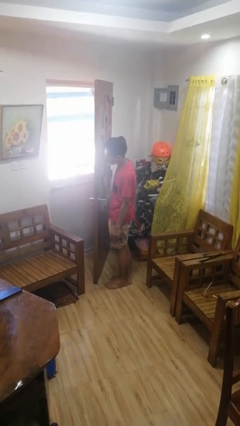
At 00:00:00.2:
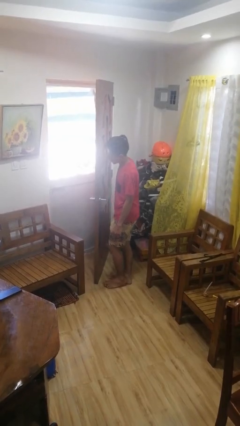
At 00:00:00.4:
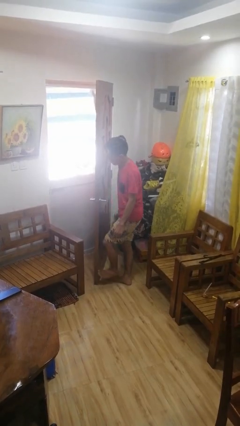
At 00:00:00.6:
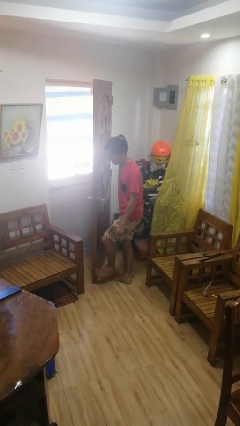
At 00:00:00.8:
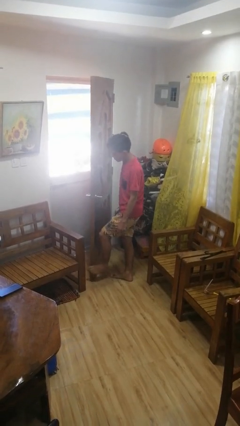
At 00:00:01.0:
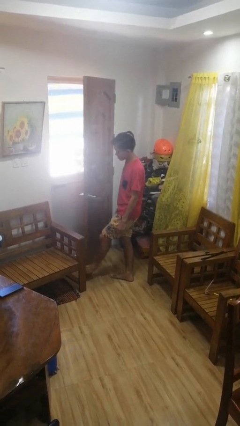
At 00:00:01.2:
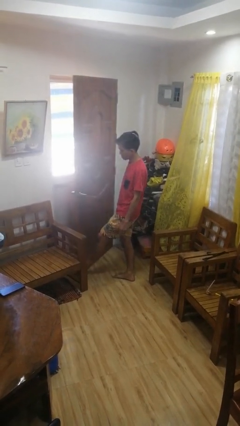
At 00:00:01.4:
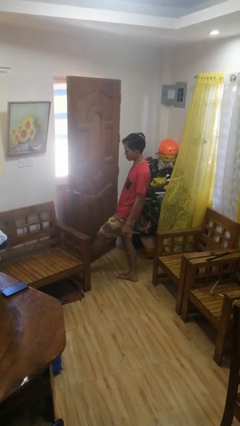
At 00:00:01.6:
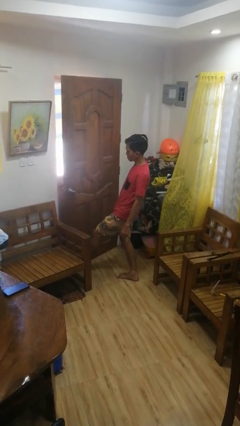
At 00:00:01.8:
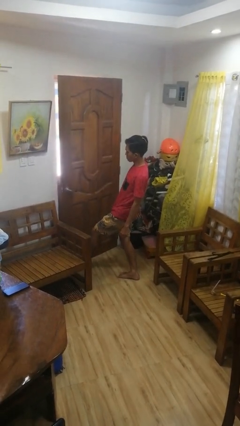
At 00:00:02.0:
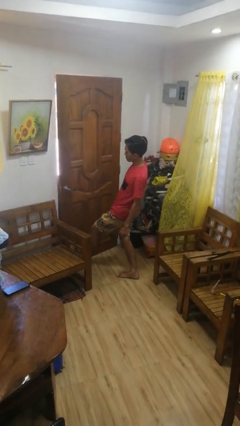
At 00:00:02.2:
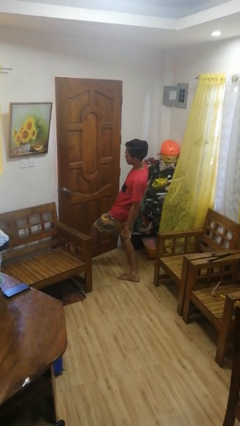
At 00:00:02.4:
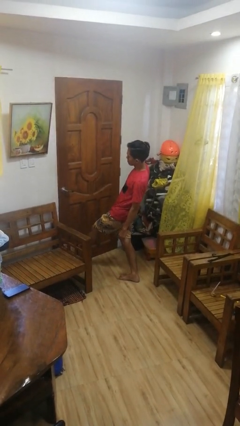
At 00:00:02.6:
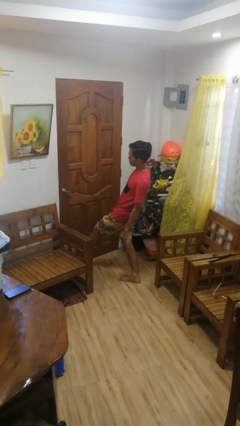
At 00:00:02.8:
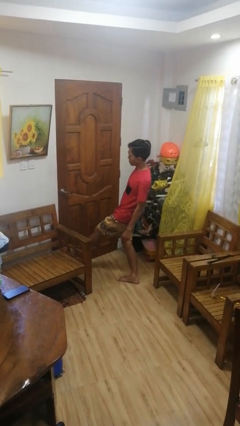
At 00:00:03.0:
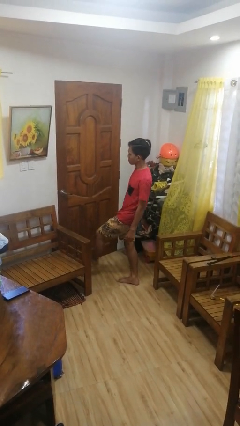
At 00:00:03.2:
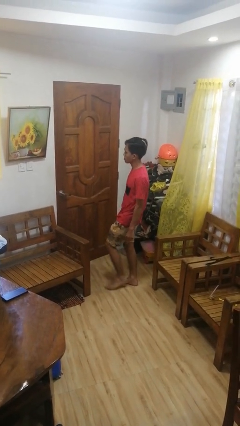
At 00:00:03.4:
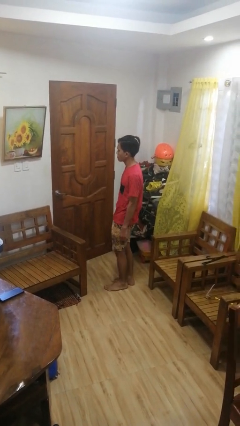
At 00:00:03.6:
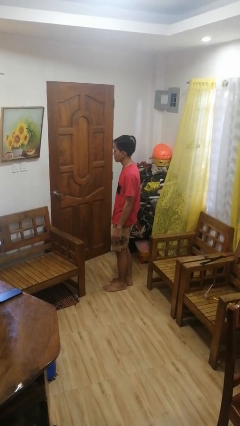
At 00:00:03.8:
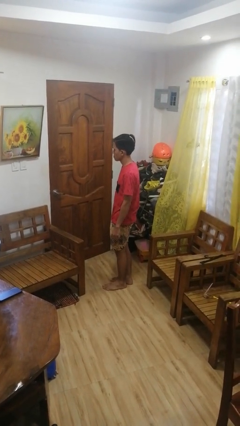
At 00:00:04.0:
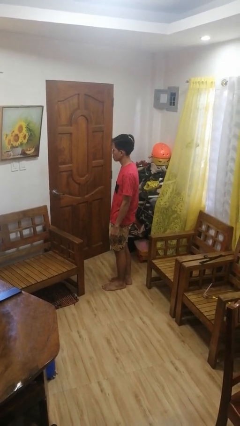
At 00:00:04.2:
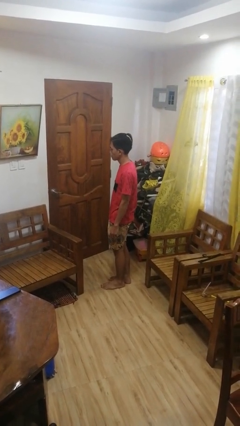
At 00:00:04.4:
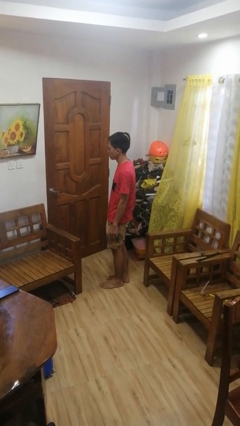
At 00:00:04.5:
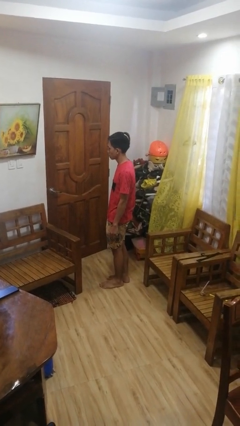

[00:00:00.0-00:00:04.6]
person closes door with foot

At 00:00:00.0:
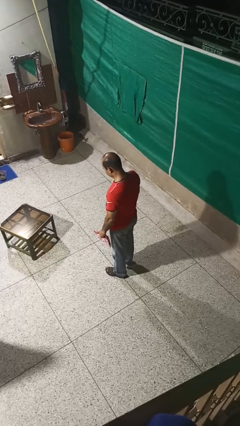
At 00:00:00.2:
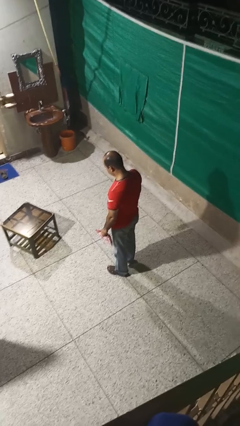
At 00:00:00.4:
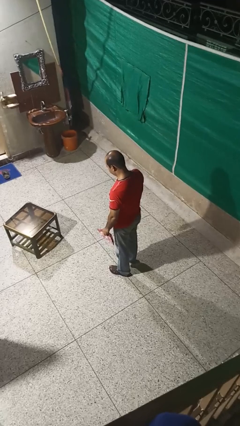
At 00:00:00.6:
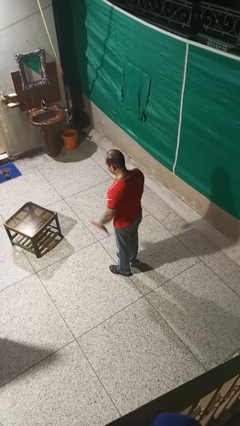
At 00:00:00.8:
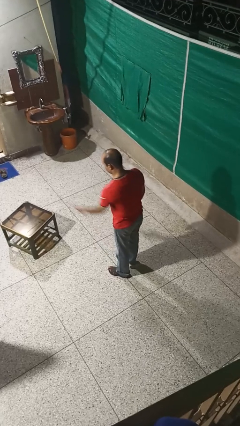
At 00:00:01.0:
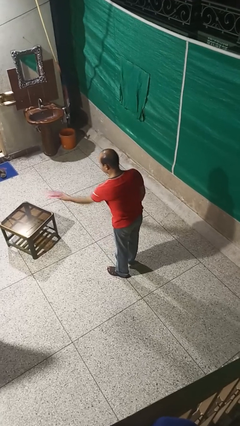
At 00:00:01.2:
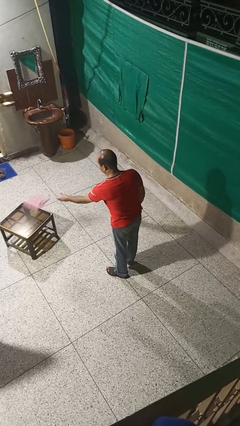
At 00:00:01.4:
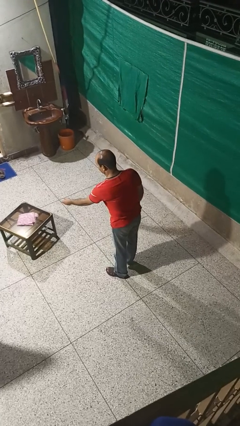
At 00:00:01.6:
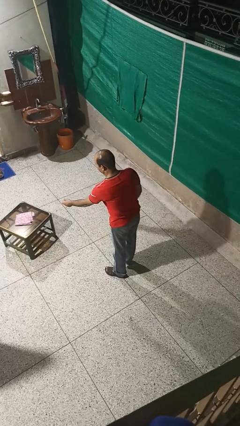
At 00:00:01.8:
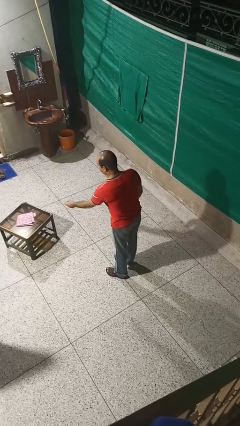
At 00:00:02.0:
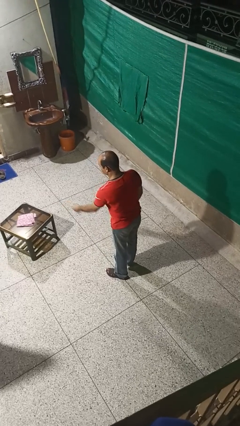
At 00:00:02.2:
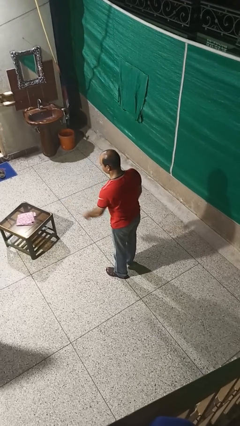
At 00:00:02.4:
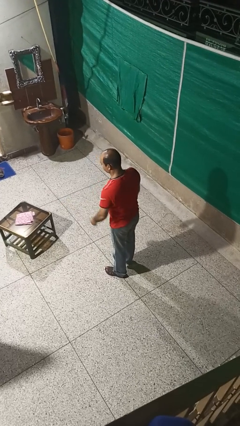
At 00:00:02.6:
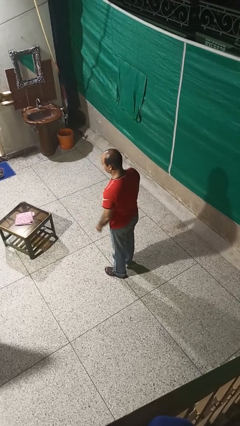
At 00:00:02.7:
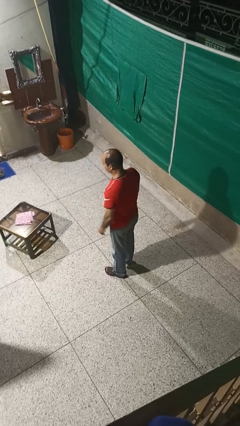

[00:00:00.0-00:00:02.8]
person throws object on table

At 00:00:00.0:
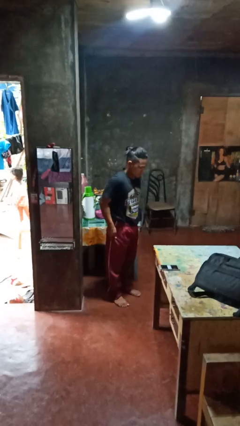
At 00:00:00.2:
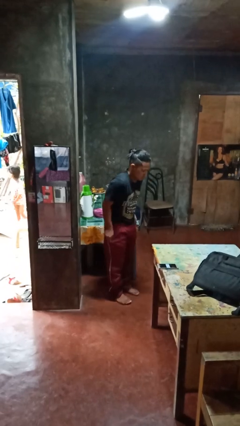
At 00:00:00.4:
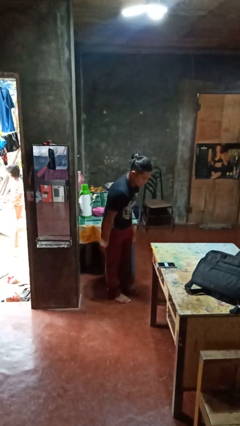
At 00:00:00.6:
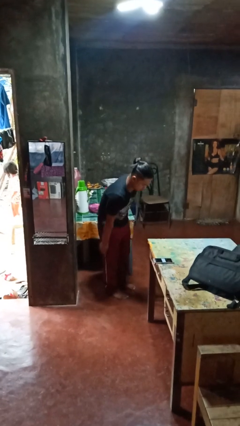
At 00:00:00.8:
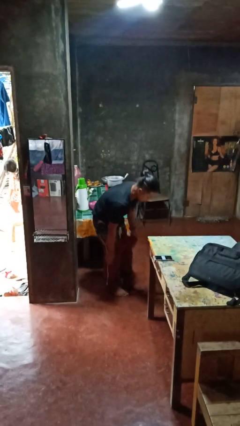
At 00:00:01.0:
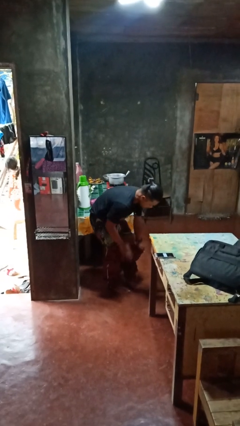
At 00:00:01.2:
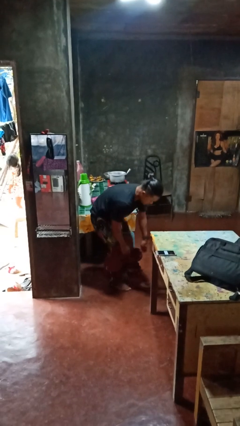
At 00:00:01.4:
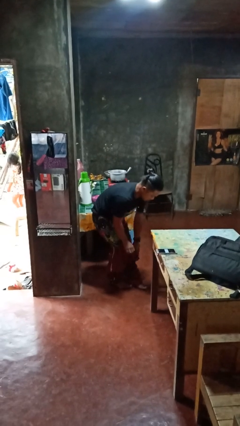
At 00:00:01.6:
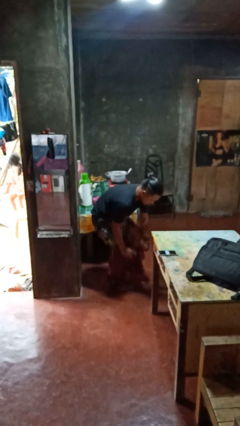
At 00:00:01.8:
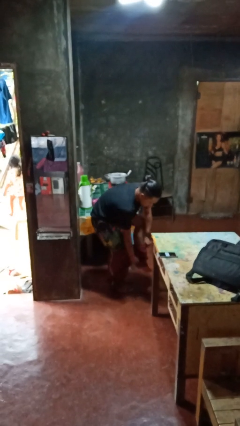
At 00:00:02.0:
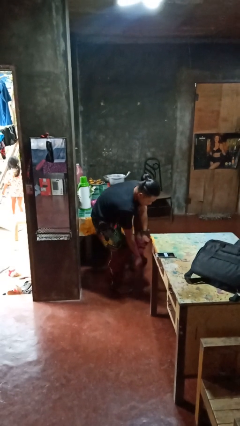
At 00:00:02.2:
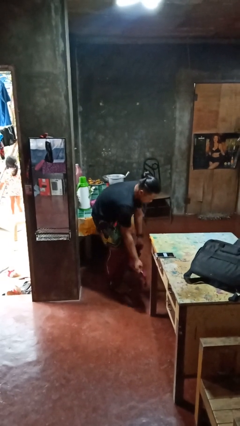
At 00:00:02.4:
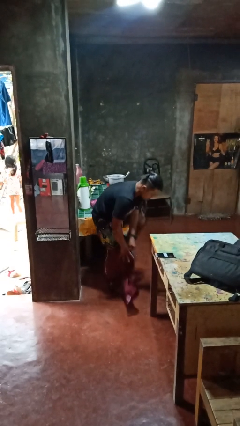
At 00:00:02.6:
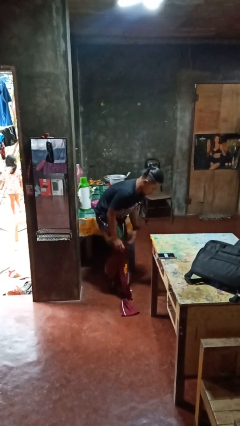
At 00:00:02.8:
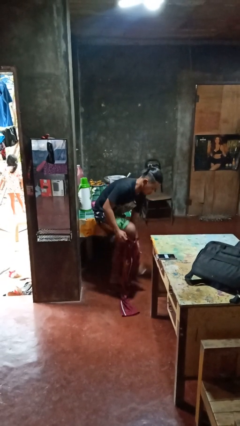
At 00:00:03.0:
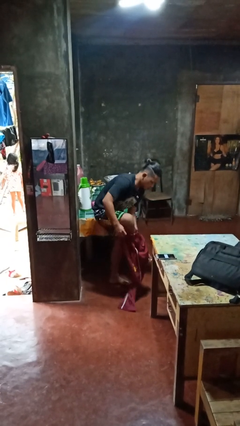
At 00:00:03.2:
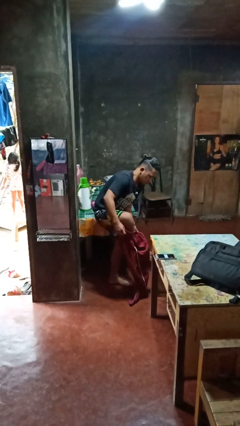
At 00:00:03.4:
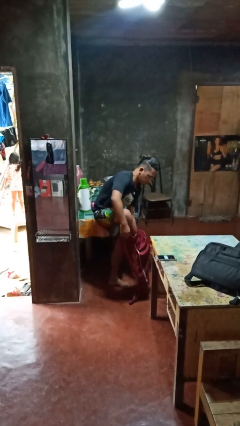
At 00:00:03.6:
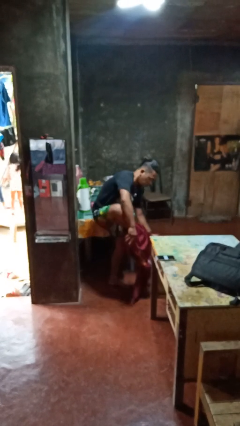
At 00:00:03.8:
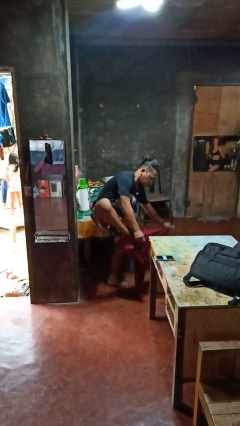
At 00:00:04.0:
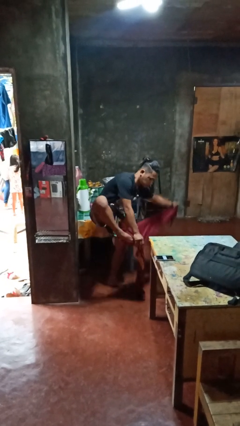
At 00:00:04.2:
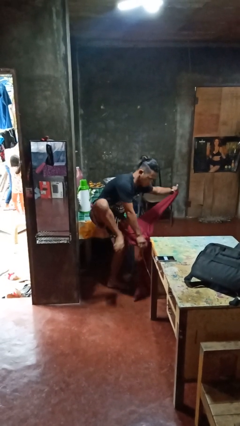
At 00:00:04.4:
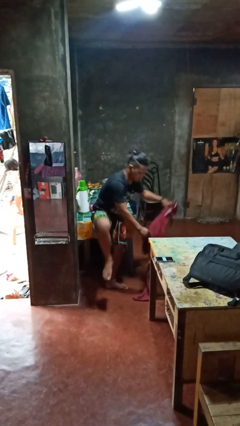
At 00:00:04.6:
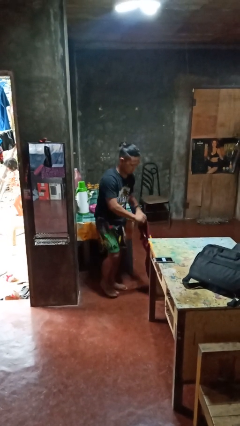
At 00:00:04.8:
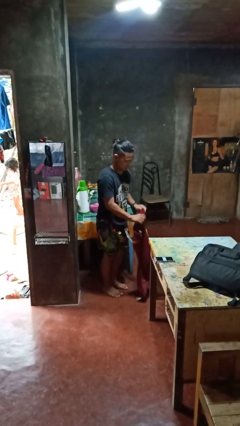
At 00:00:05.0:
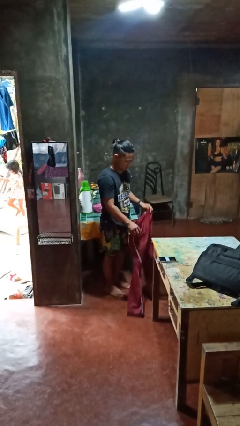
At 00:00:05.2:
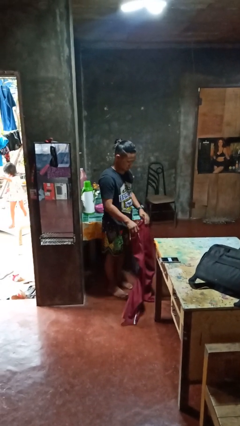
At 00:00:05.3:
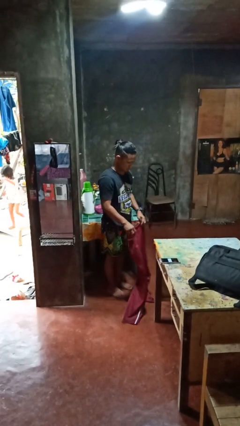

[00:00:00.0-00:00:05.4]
person takes off pants

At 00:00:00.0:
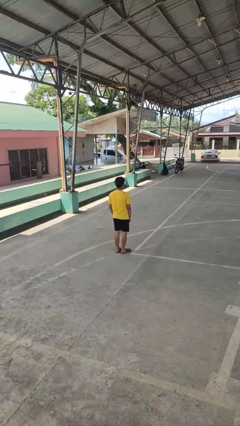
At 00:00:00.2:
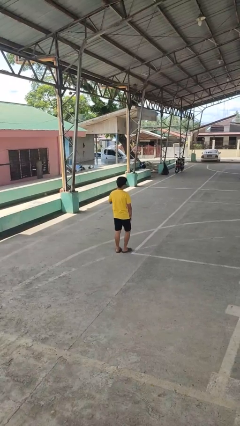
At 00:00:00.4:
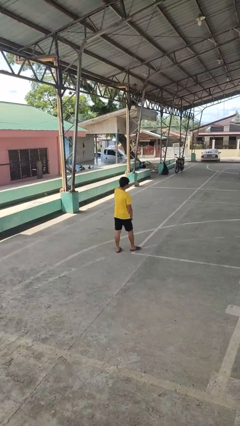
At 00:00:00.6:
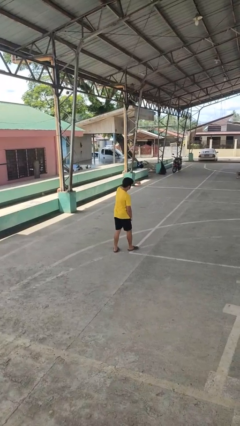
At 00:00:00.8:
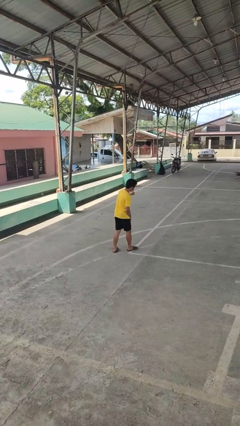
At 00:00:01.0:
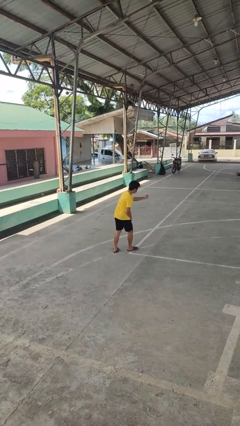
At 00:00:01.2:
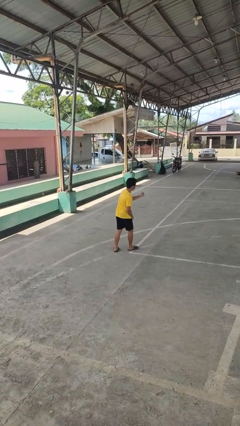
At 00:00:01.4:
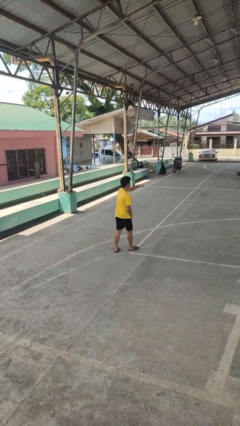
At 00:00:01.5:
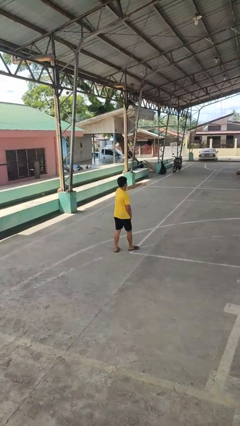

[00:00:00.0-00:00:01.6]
person punches

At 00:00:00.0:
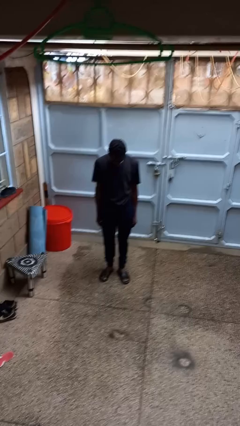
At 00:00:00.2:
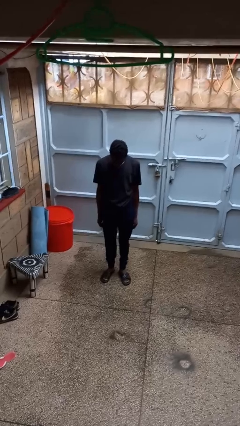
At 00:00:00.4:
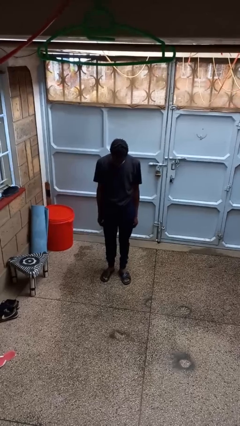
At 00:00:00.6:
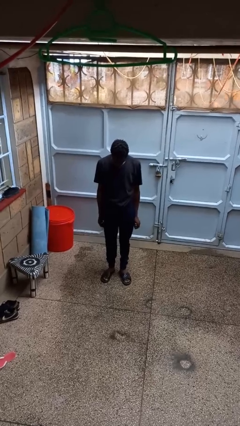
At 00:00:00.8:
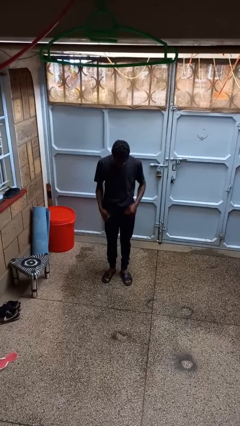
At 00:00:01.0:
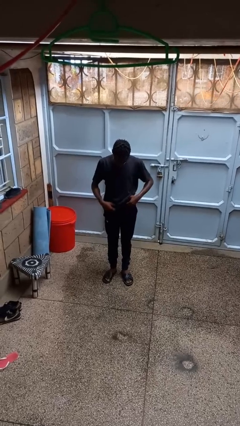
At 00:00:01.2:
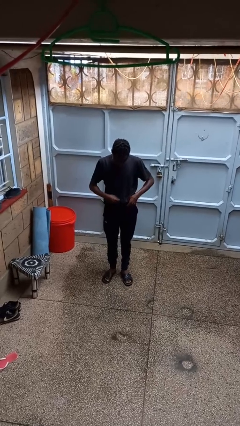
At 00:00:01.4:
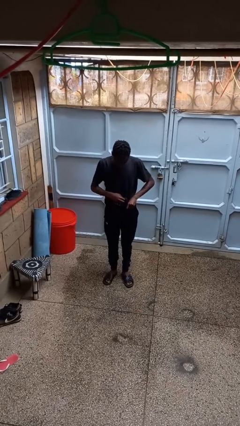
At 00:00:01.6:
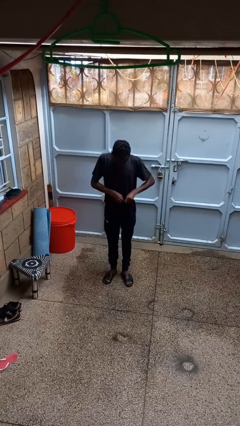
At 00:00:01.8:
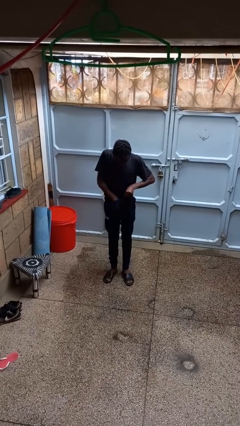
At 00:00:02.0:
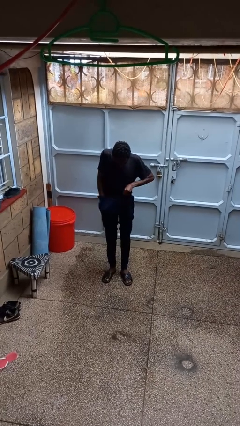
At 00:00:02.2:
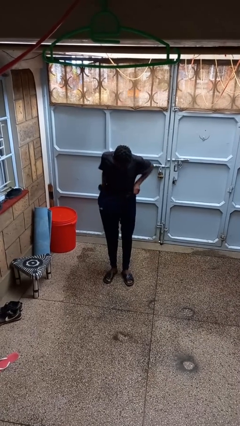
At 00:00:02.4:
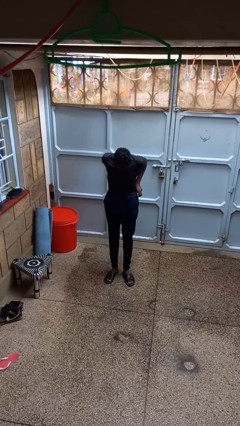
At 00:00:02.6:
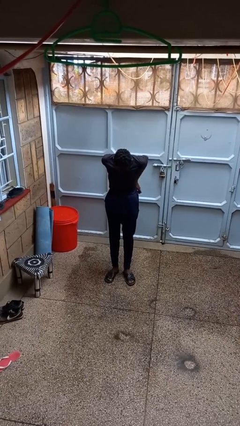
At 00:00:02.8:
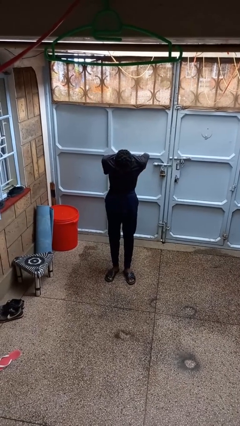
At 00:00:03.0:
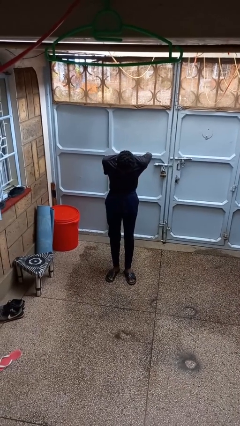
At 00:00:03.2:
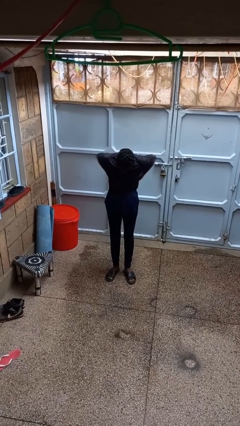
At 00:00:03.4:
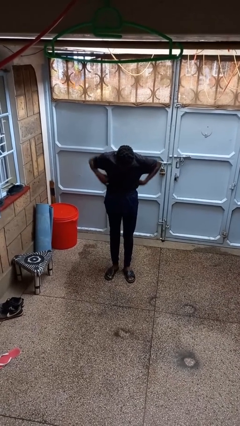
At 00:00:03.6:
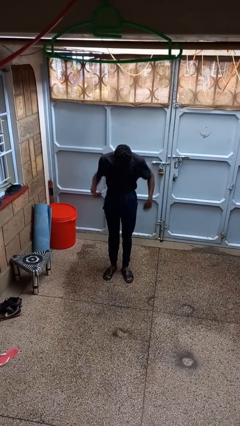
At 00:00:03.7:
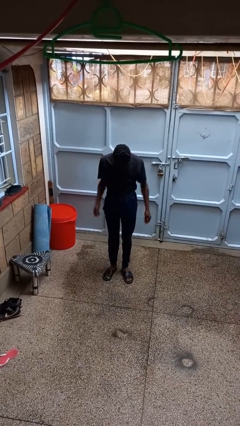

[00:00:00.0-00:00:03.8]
person tucks in shirt
